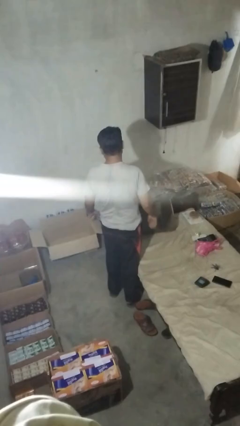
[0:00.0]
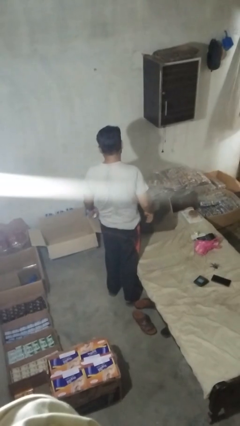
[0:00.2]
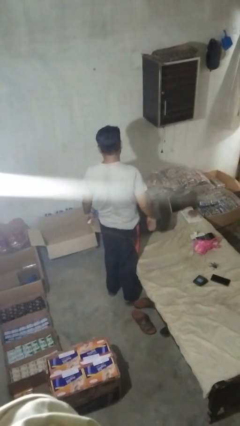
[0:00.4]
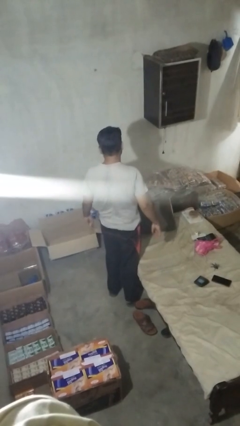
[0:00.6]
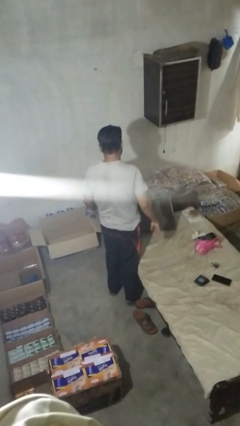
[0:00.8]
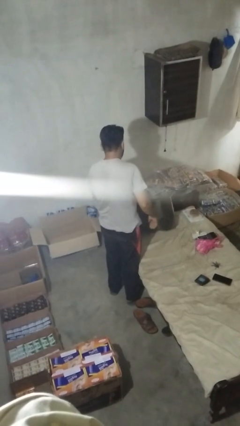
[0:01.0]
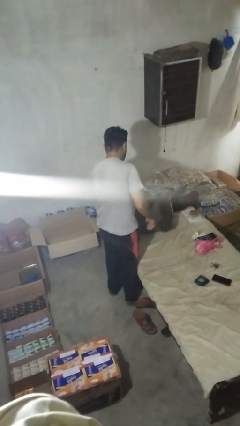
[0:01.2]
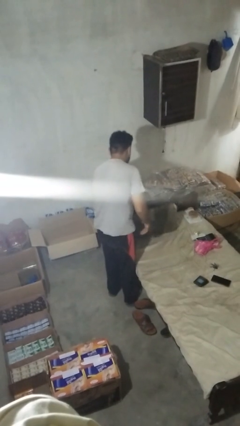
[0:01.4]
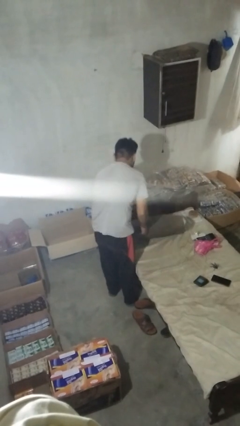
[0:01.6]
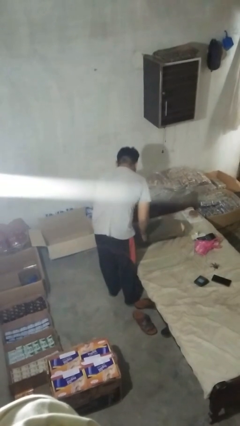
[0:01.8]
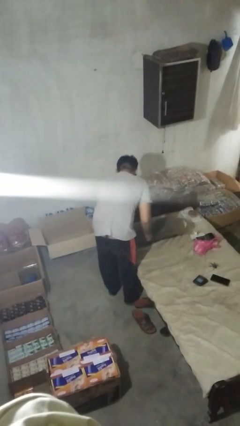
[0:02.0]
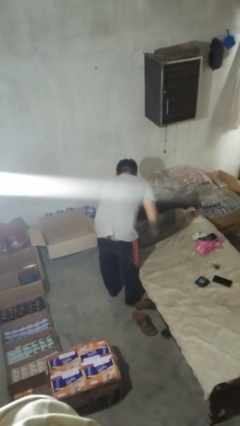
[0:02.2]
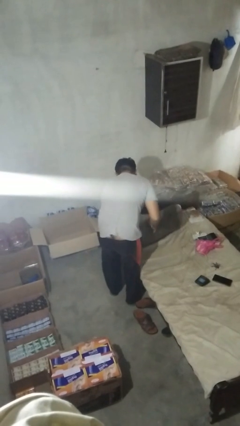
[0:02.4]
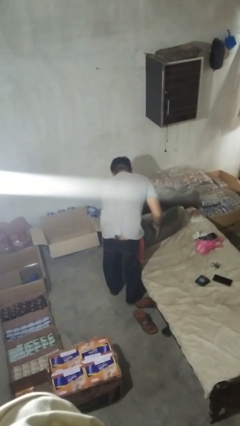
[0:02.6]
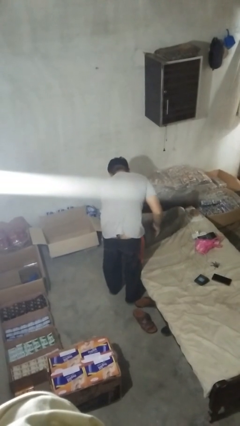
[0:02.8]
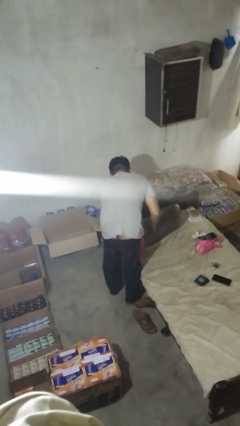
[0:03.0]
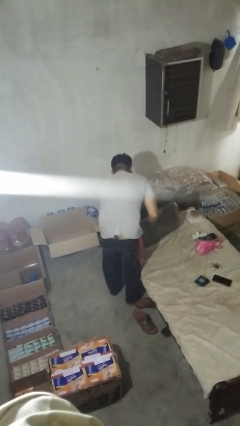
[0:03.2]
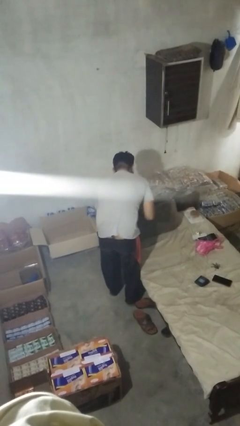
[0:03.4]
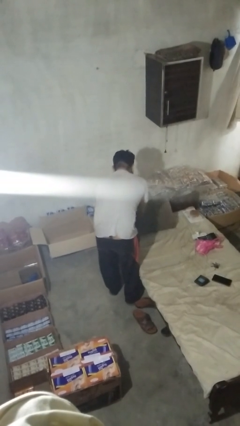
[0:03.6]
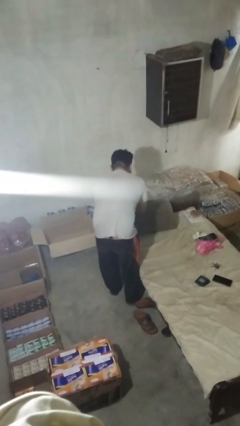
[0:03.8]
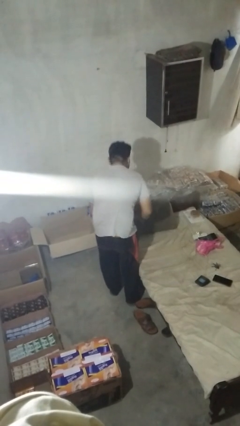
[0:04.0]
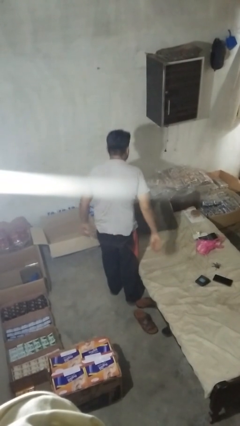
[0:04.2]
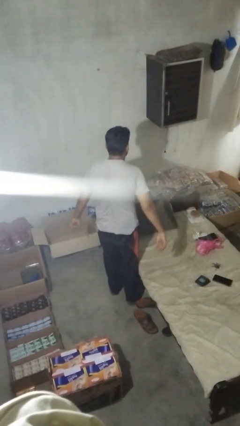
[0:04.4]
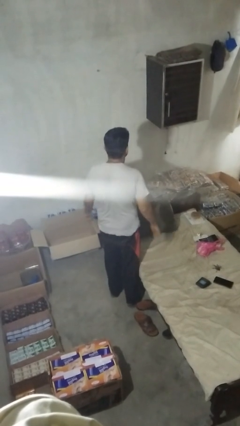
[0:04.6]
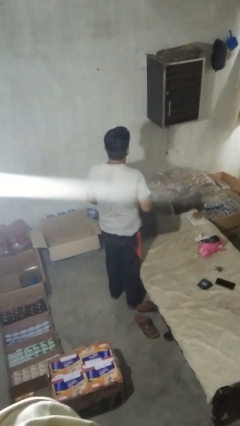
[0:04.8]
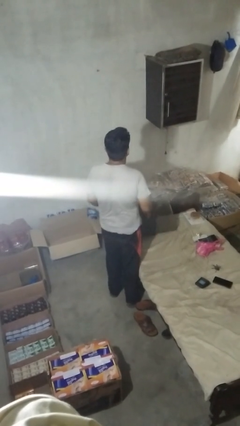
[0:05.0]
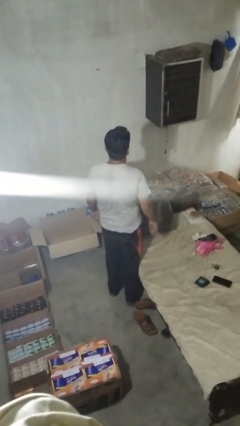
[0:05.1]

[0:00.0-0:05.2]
person searches in couch

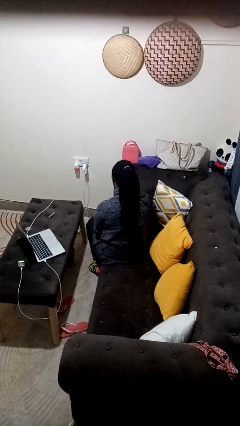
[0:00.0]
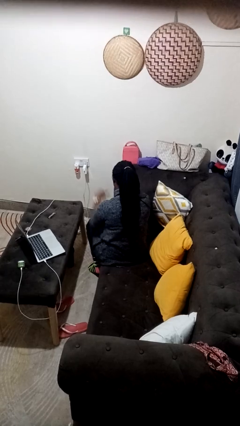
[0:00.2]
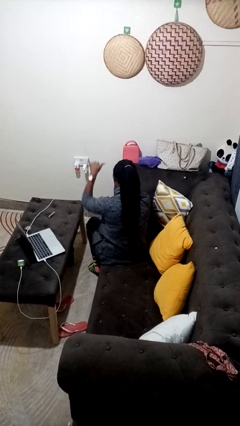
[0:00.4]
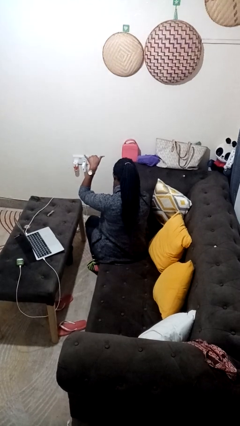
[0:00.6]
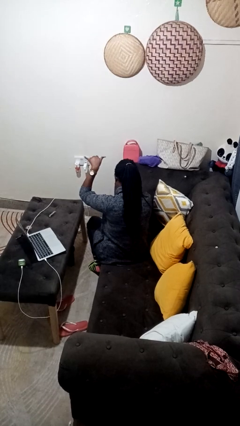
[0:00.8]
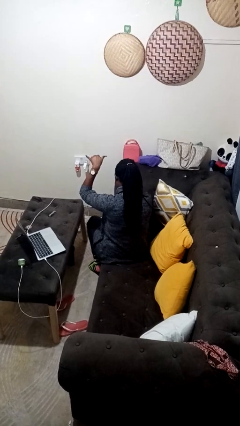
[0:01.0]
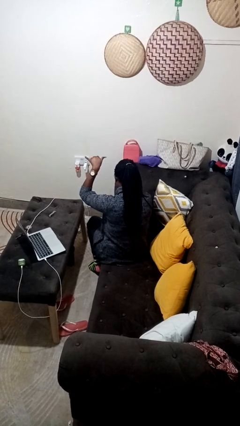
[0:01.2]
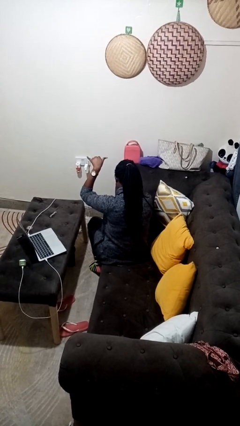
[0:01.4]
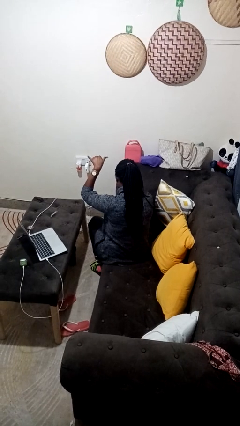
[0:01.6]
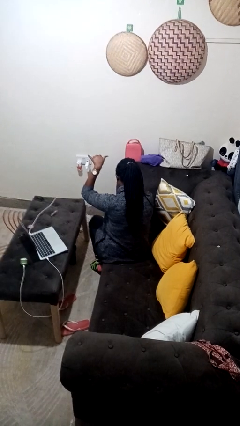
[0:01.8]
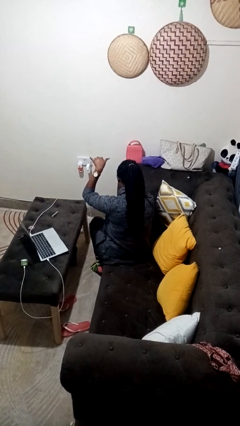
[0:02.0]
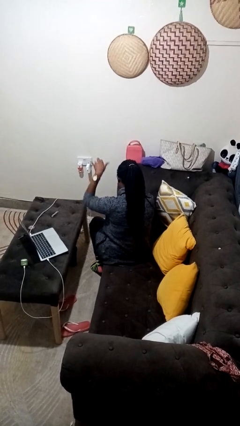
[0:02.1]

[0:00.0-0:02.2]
person gestures hang loose

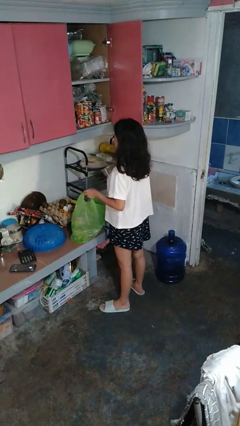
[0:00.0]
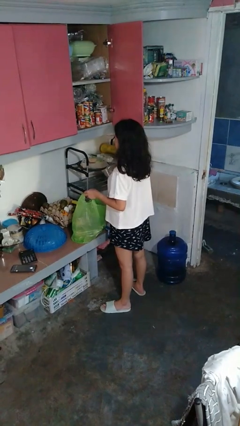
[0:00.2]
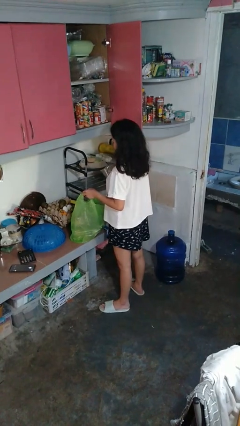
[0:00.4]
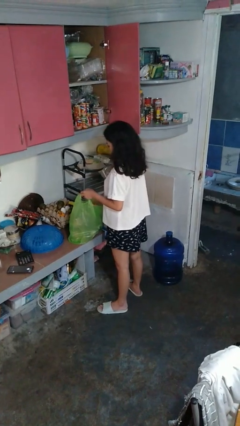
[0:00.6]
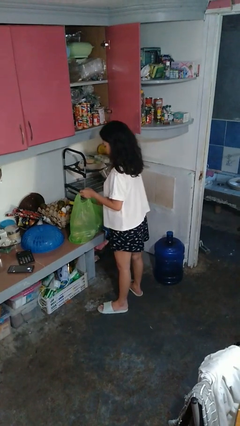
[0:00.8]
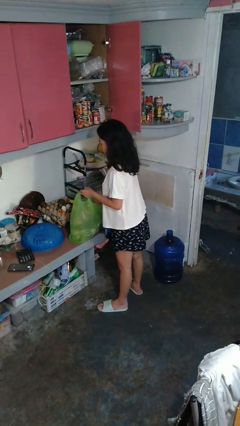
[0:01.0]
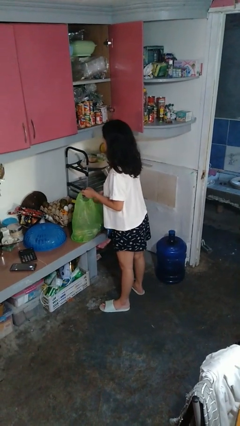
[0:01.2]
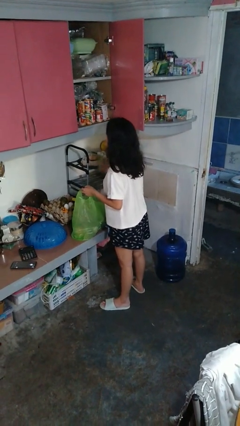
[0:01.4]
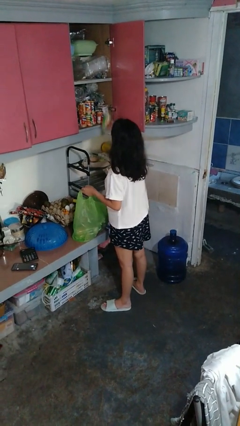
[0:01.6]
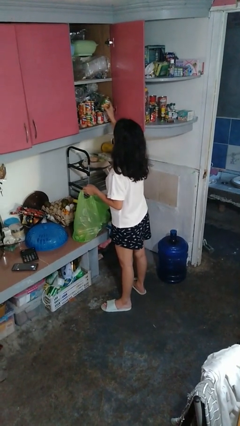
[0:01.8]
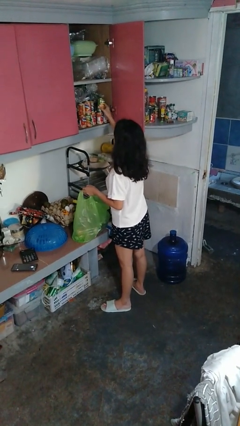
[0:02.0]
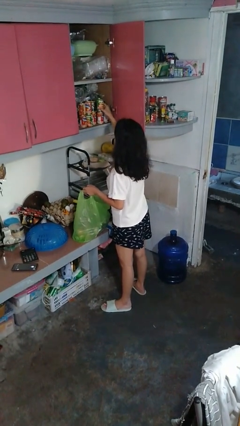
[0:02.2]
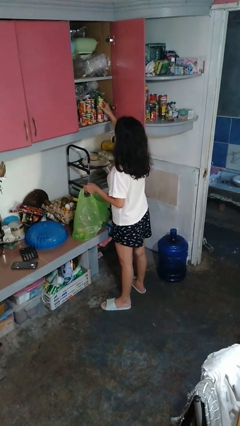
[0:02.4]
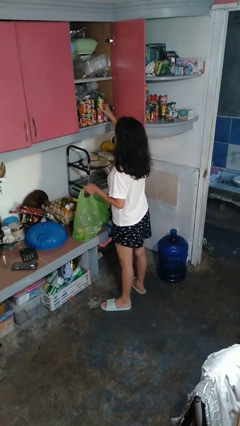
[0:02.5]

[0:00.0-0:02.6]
person loads groceries into cabinet

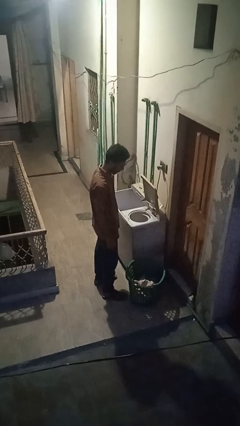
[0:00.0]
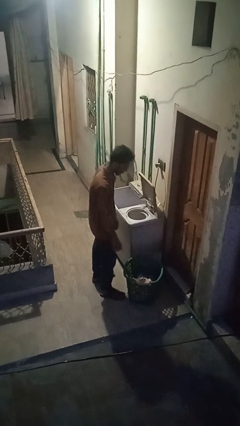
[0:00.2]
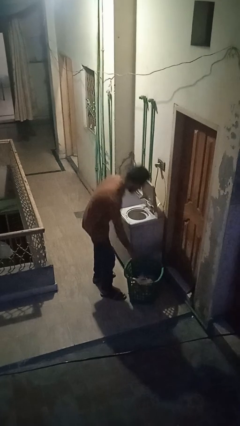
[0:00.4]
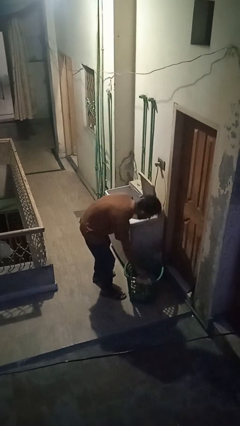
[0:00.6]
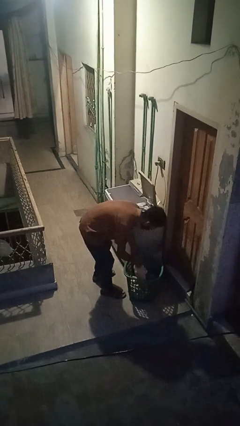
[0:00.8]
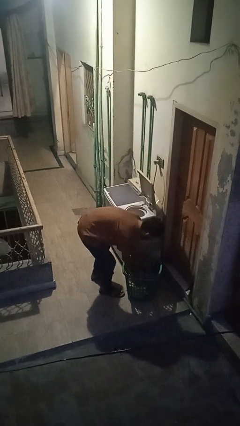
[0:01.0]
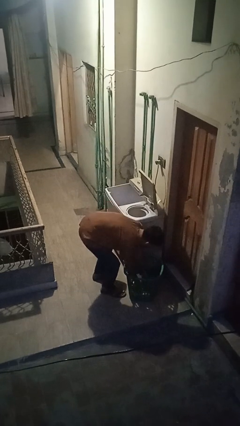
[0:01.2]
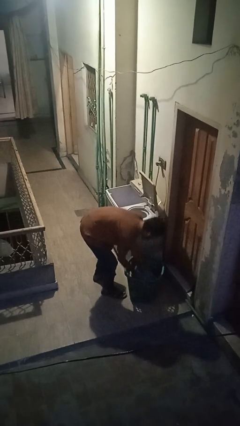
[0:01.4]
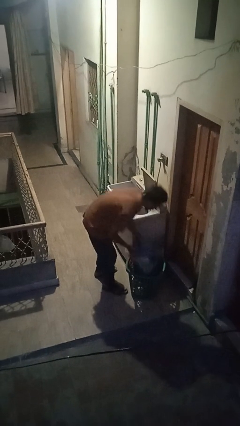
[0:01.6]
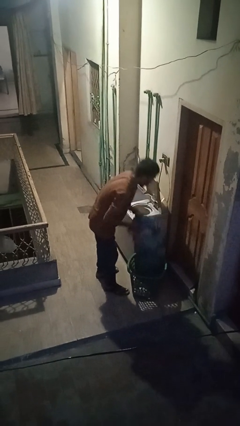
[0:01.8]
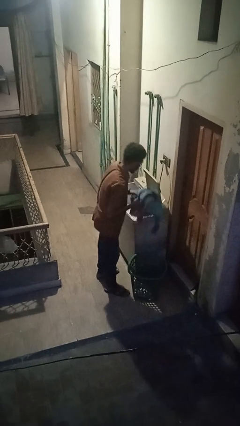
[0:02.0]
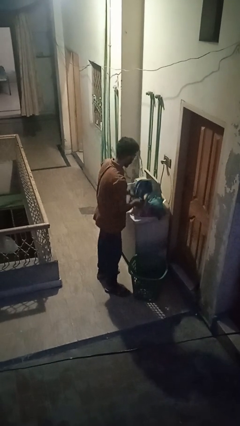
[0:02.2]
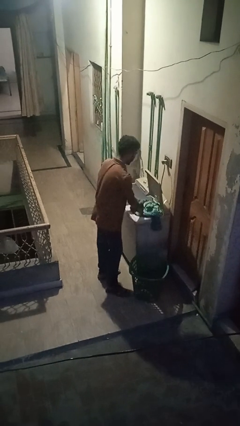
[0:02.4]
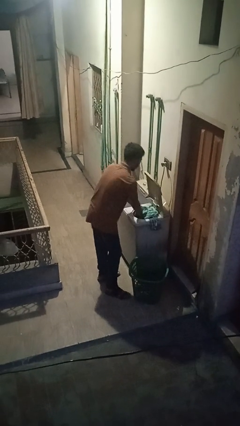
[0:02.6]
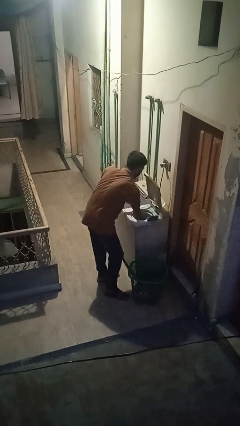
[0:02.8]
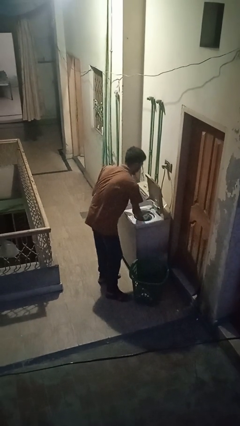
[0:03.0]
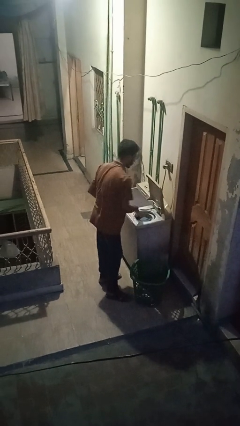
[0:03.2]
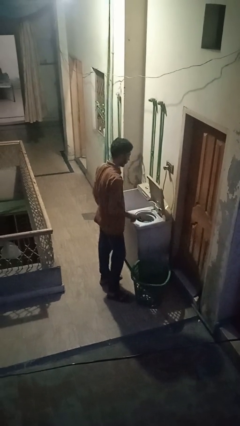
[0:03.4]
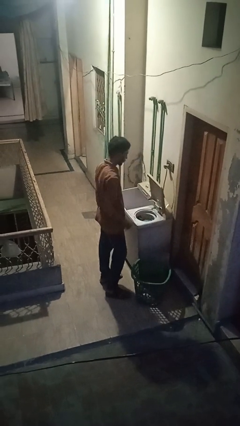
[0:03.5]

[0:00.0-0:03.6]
person loads dryer

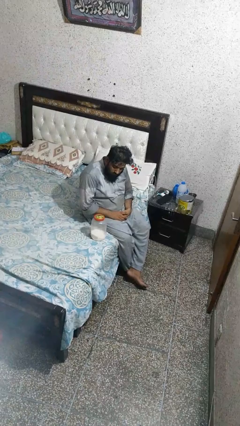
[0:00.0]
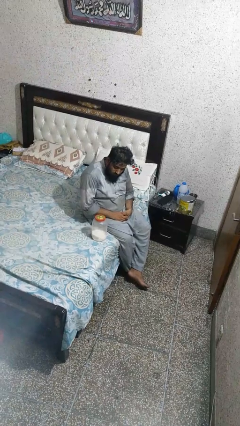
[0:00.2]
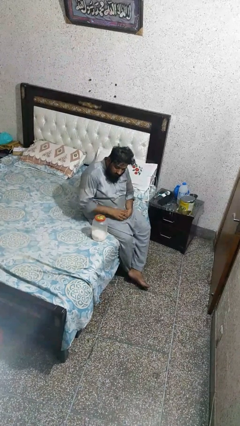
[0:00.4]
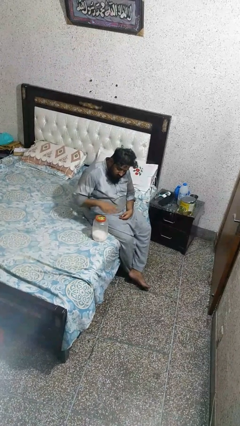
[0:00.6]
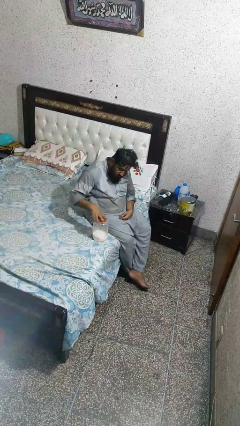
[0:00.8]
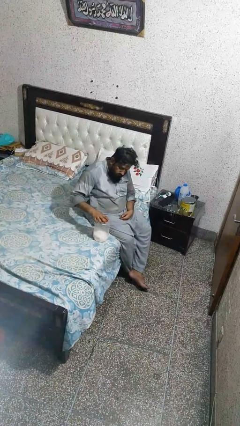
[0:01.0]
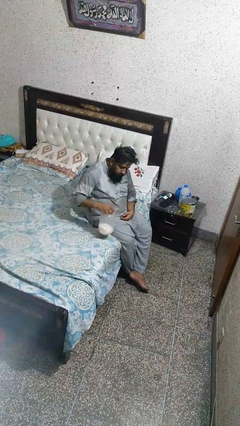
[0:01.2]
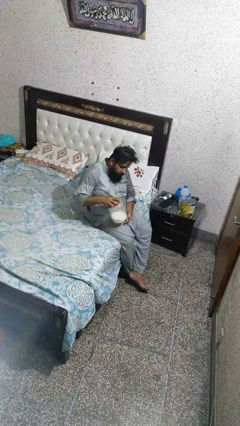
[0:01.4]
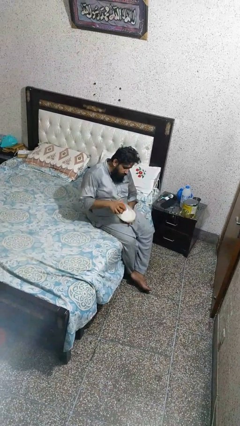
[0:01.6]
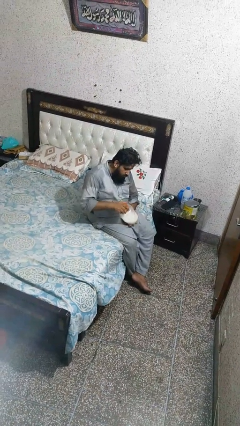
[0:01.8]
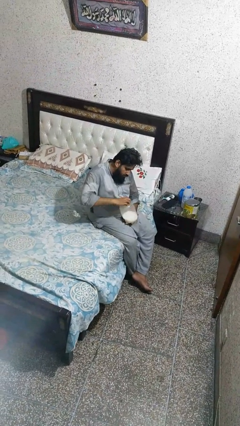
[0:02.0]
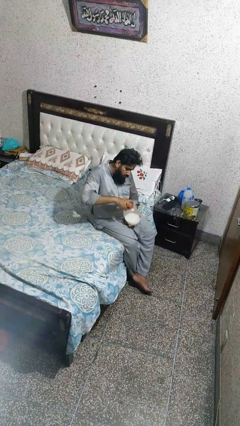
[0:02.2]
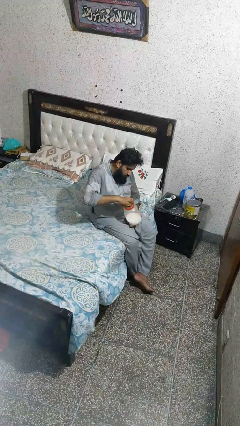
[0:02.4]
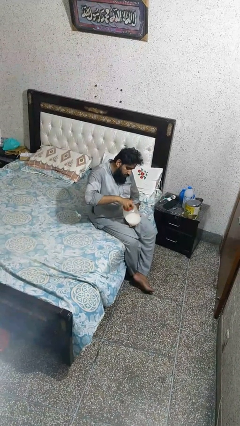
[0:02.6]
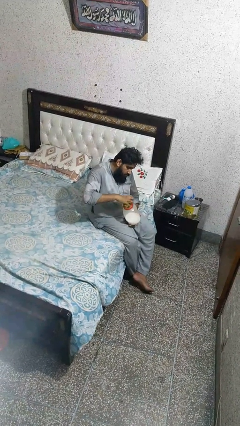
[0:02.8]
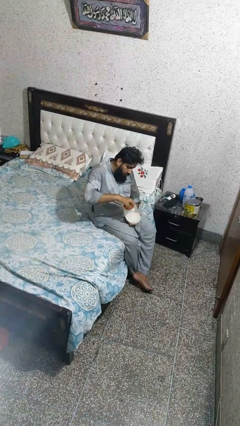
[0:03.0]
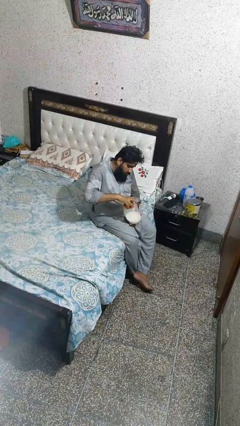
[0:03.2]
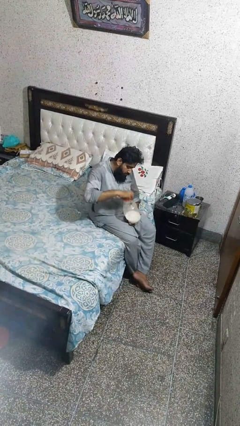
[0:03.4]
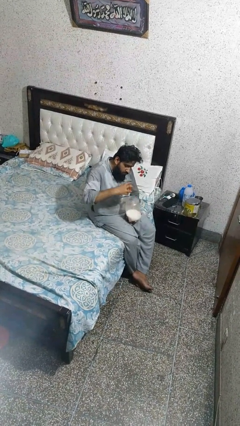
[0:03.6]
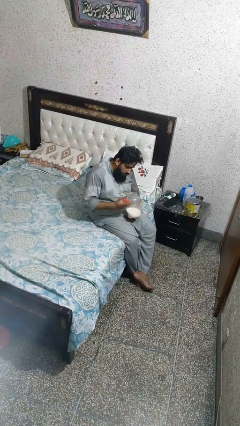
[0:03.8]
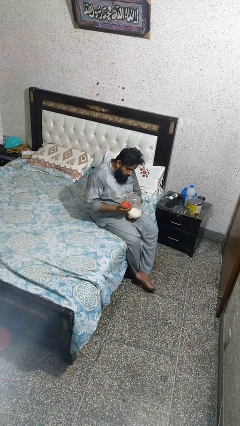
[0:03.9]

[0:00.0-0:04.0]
person opens jar
